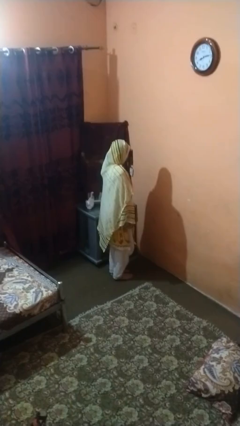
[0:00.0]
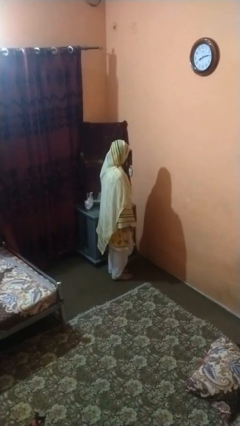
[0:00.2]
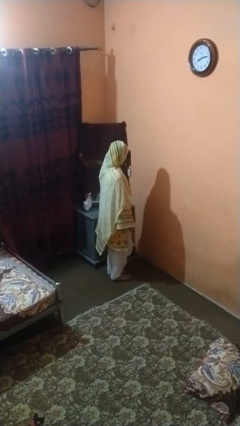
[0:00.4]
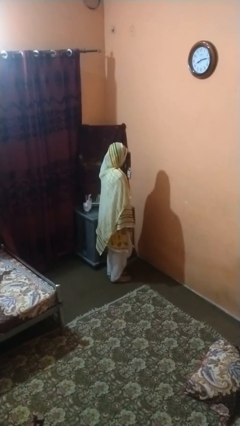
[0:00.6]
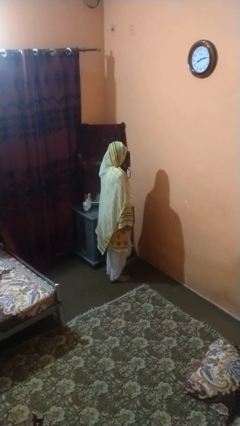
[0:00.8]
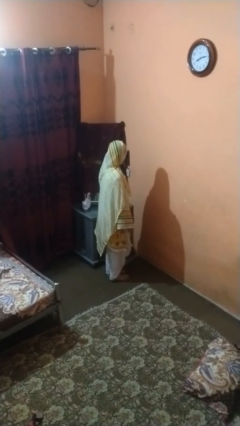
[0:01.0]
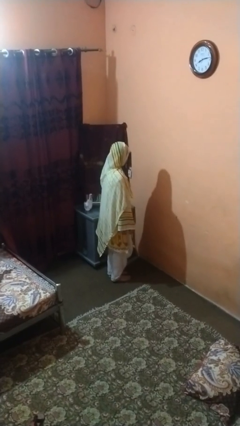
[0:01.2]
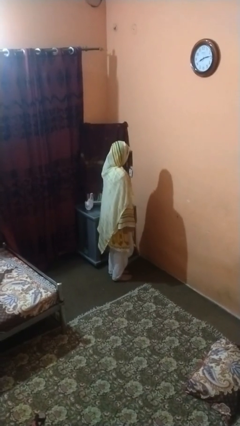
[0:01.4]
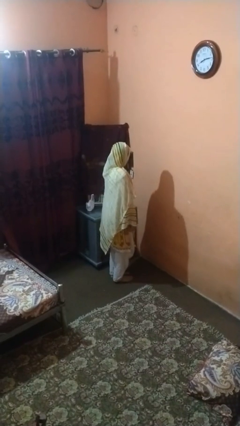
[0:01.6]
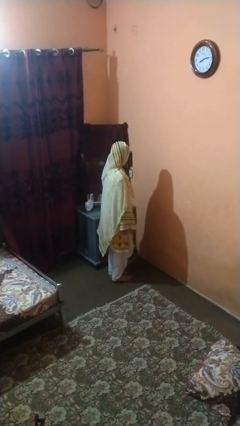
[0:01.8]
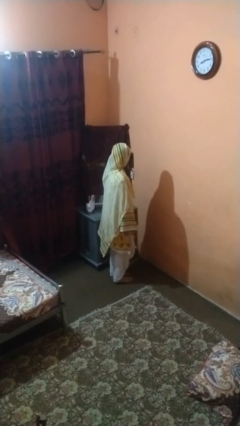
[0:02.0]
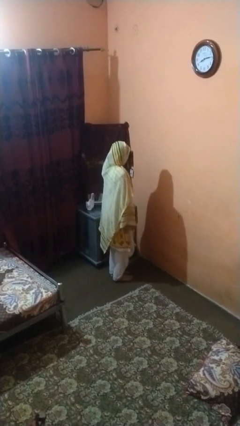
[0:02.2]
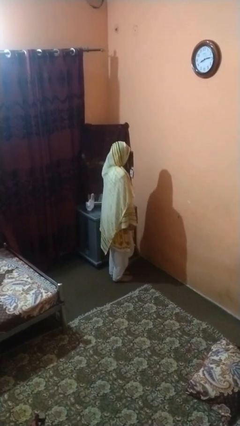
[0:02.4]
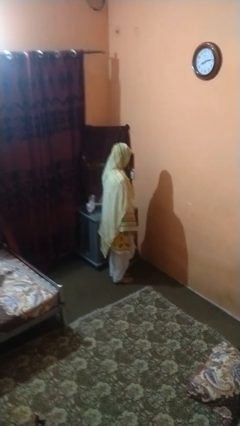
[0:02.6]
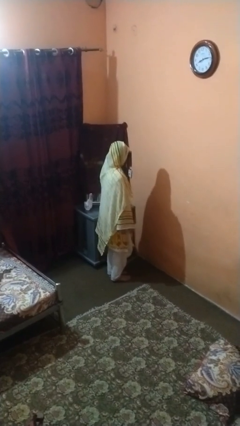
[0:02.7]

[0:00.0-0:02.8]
person shrugs

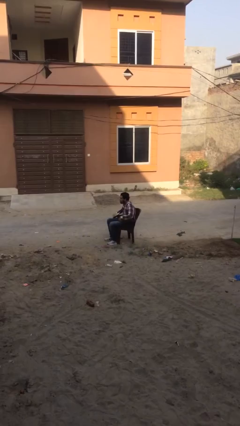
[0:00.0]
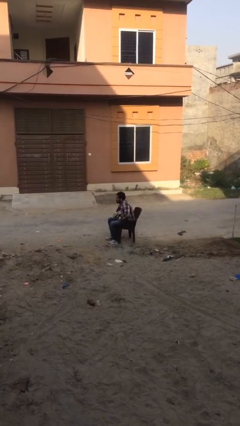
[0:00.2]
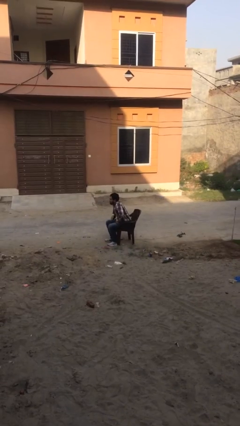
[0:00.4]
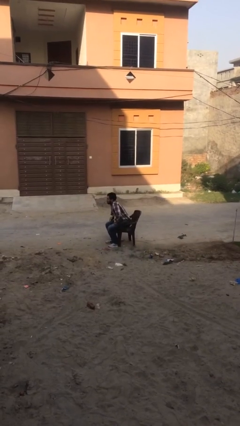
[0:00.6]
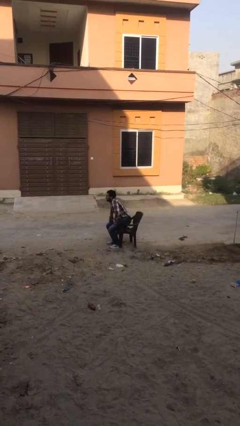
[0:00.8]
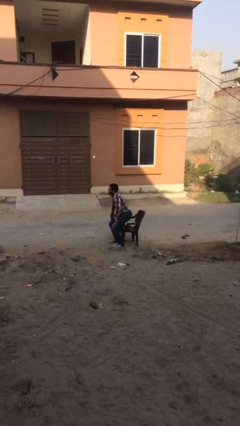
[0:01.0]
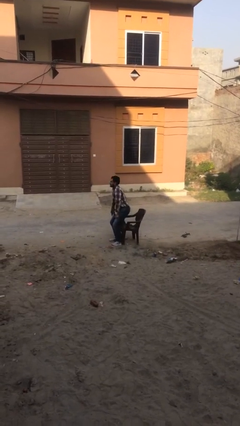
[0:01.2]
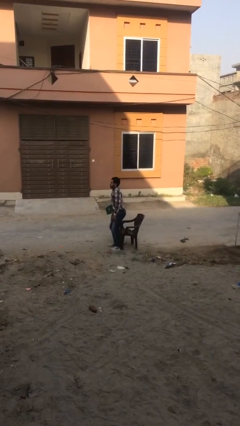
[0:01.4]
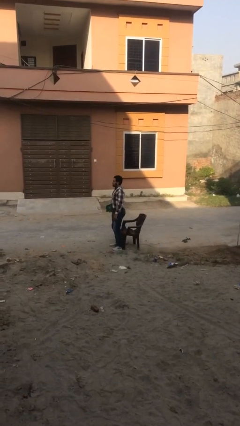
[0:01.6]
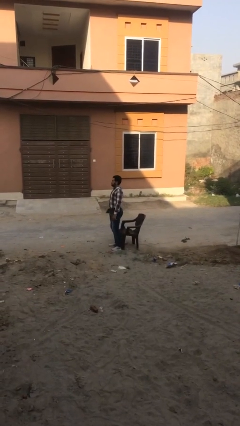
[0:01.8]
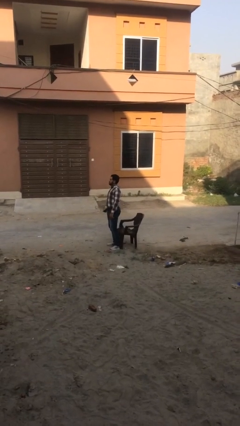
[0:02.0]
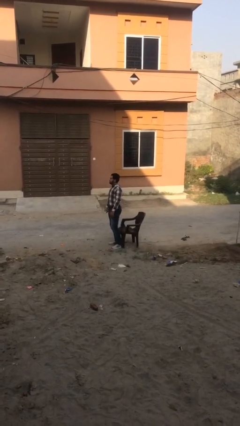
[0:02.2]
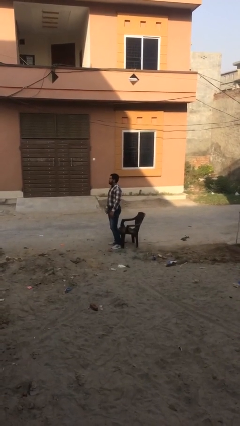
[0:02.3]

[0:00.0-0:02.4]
person stands up

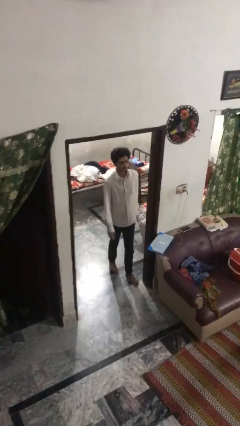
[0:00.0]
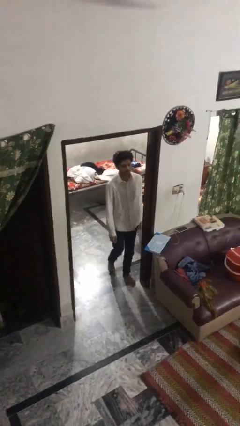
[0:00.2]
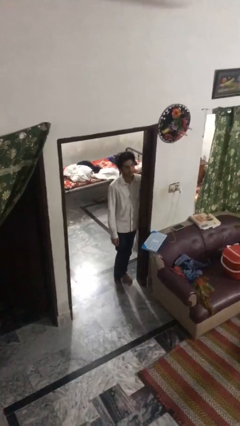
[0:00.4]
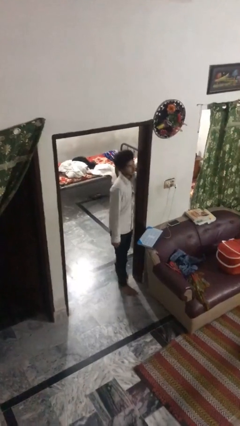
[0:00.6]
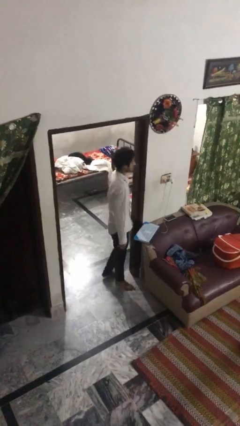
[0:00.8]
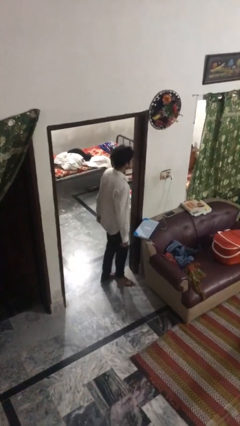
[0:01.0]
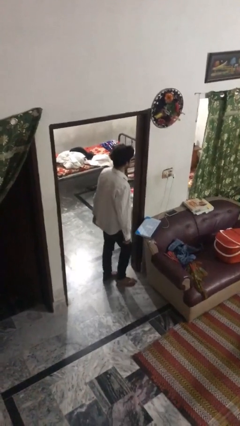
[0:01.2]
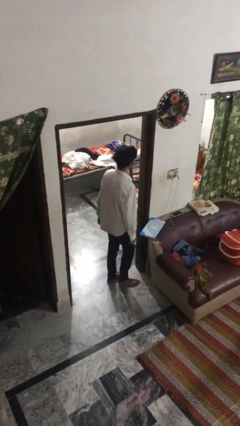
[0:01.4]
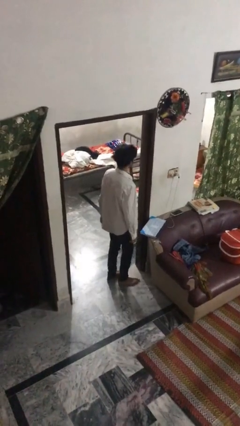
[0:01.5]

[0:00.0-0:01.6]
person bumps into wall

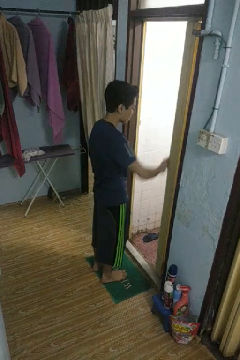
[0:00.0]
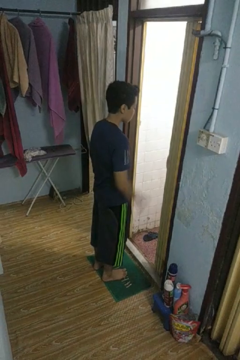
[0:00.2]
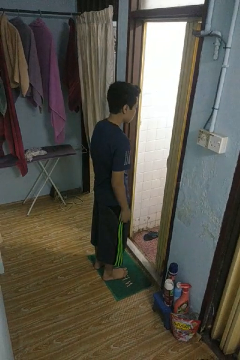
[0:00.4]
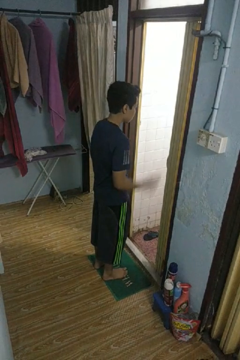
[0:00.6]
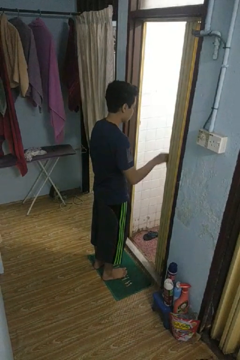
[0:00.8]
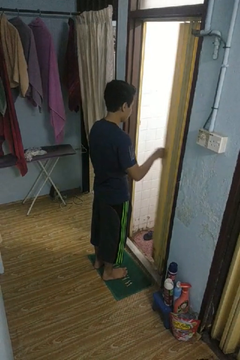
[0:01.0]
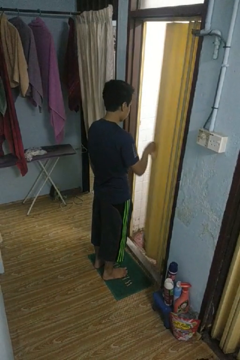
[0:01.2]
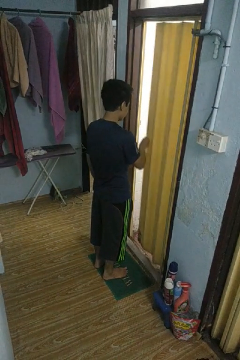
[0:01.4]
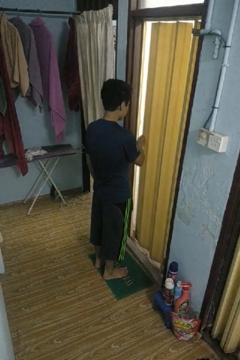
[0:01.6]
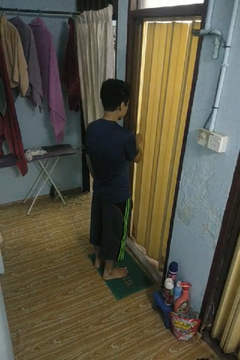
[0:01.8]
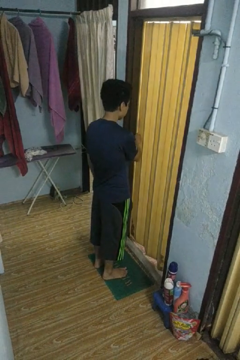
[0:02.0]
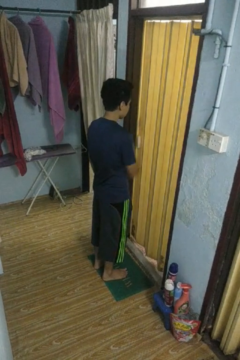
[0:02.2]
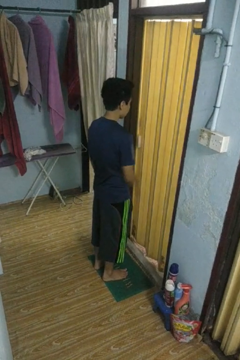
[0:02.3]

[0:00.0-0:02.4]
person closes sliding door

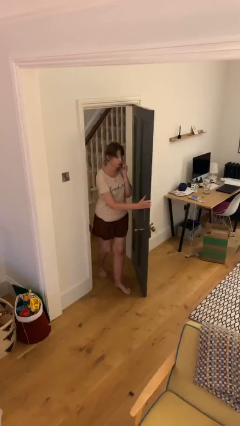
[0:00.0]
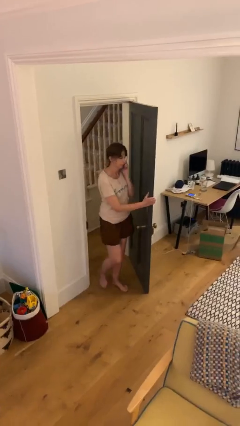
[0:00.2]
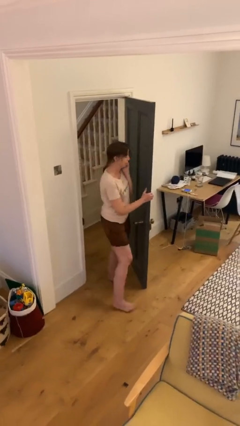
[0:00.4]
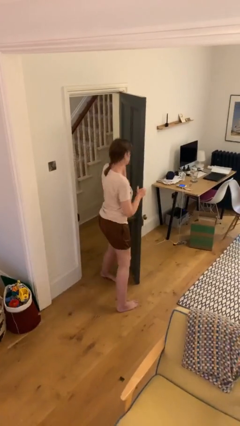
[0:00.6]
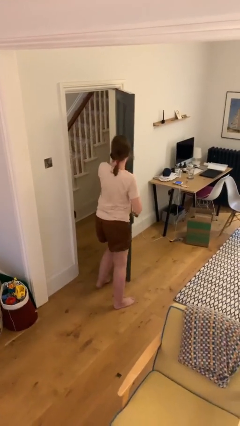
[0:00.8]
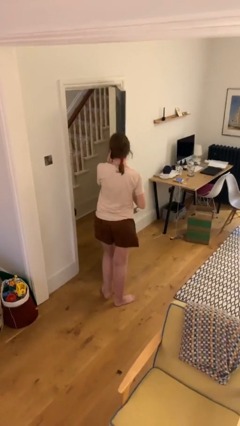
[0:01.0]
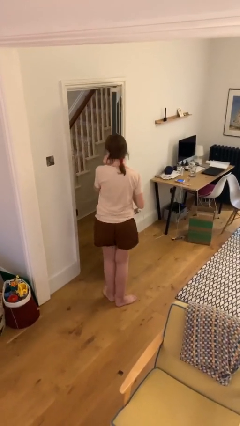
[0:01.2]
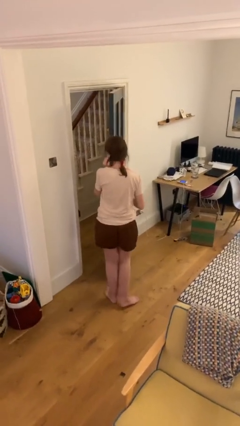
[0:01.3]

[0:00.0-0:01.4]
person enters scene through structure

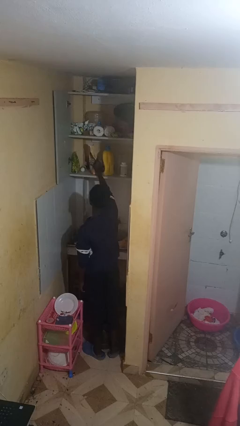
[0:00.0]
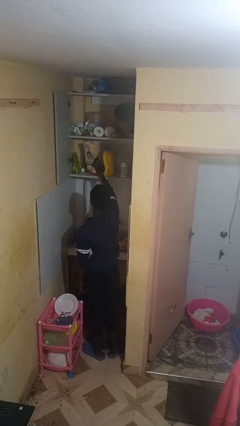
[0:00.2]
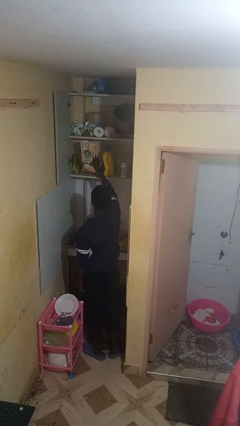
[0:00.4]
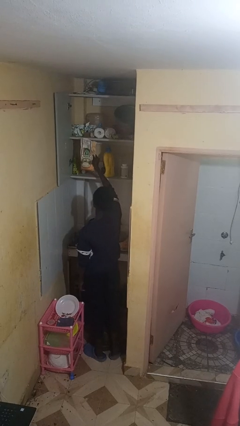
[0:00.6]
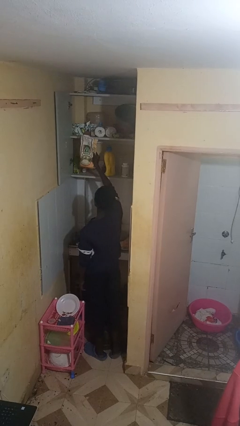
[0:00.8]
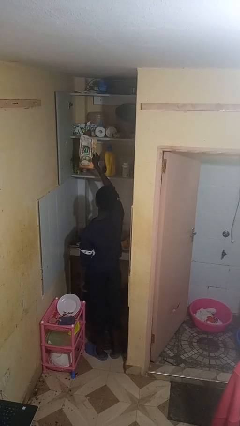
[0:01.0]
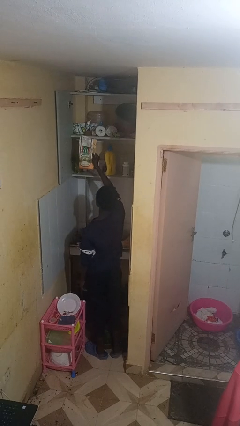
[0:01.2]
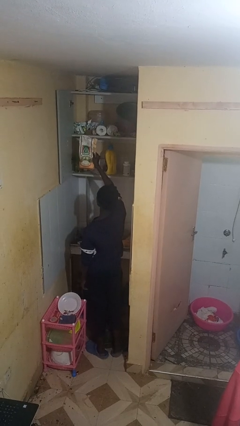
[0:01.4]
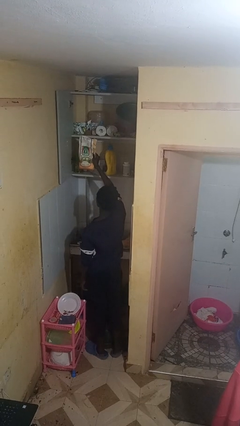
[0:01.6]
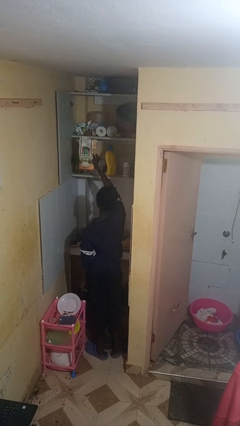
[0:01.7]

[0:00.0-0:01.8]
person takes object from cabinet

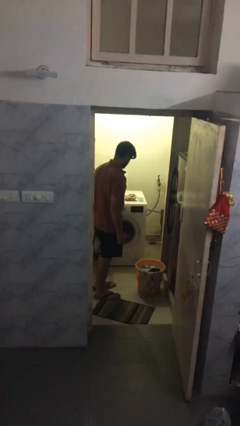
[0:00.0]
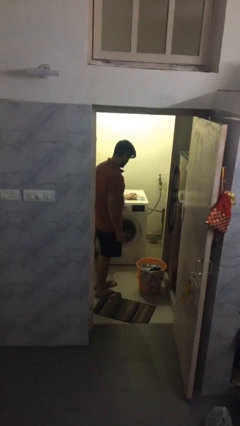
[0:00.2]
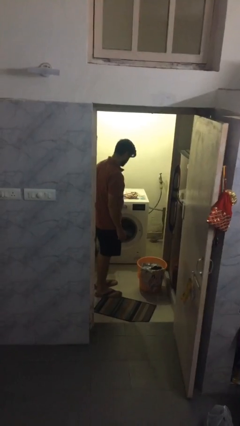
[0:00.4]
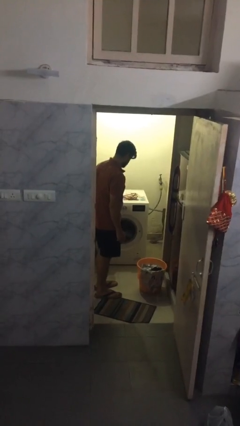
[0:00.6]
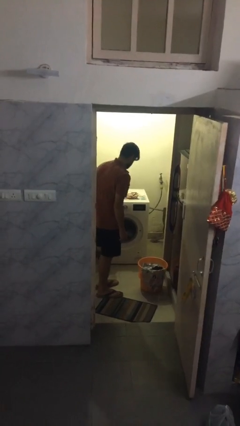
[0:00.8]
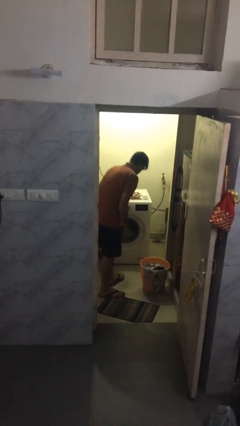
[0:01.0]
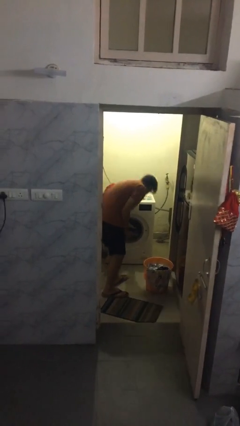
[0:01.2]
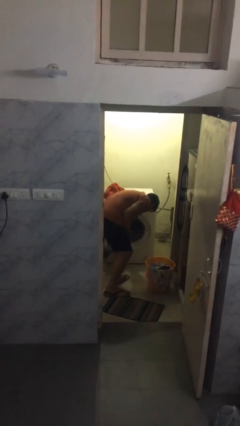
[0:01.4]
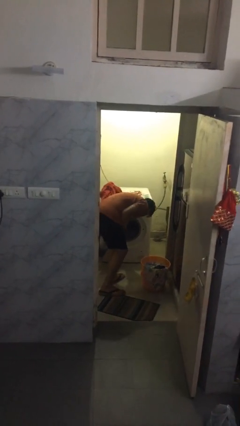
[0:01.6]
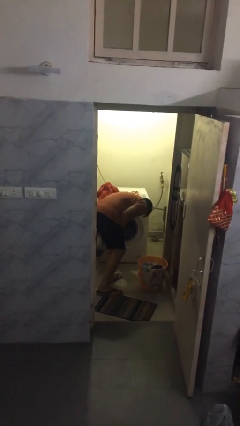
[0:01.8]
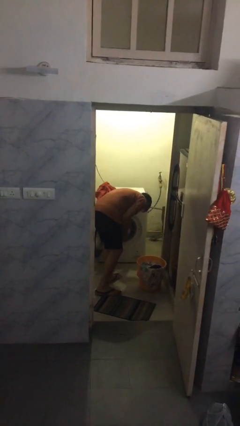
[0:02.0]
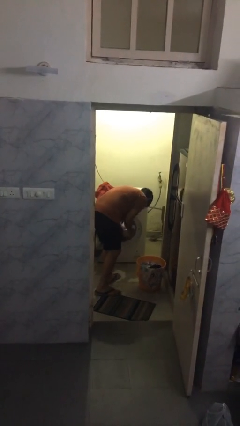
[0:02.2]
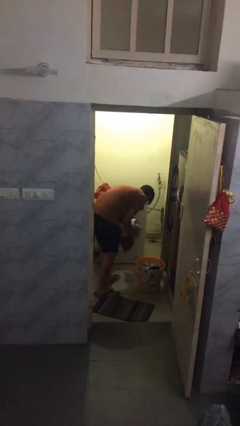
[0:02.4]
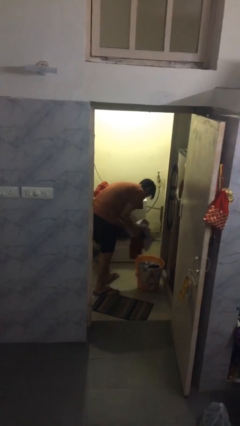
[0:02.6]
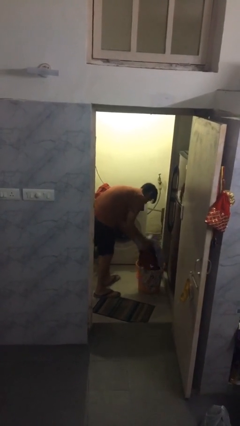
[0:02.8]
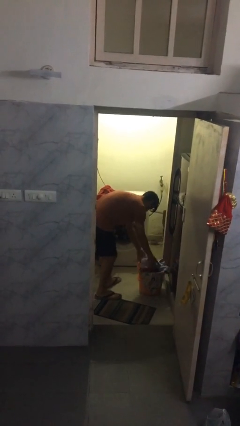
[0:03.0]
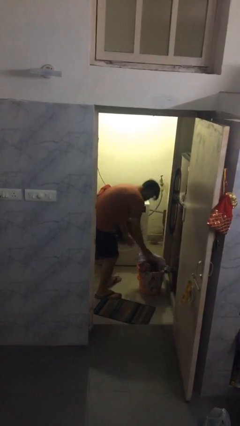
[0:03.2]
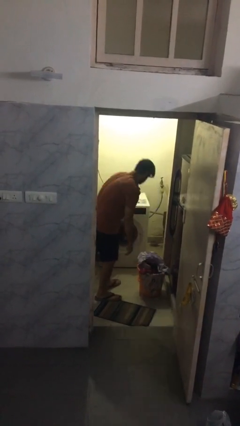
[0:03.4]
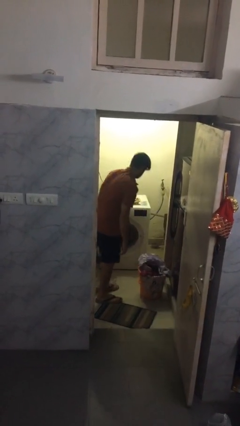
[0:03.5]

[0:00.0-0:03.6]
person unloads dryer

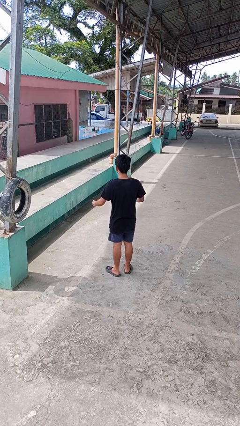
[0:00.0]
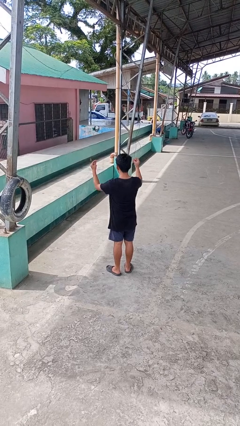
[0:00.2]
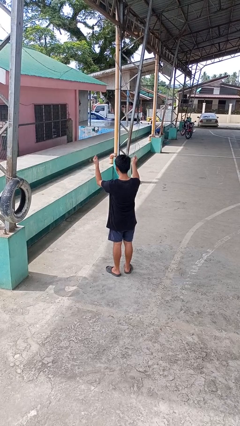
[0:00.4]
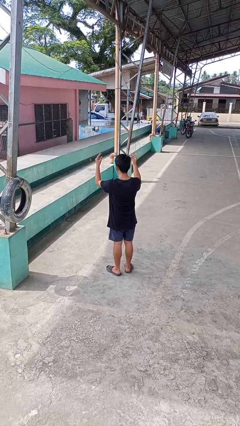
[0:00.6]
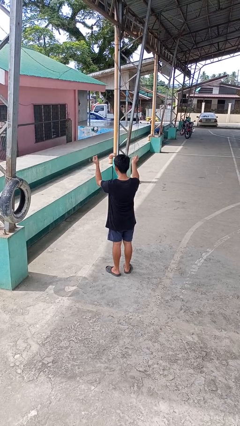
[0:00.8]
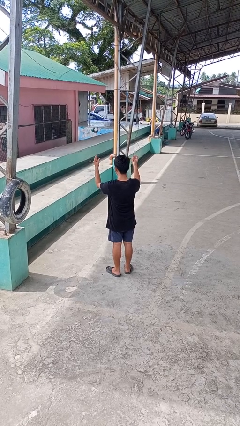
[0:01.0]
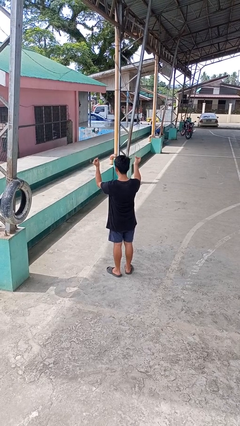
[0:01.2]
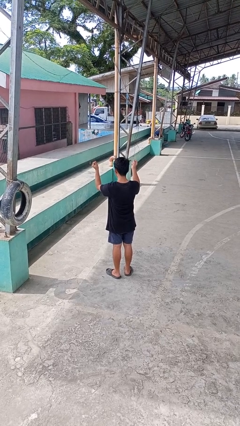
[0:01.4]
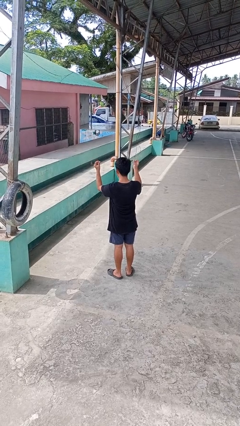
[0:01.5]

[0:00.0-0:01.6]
person snaps fingers
